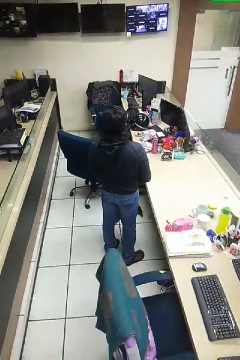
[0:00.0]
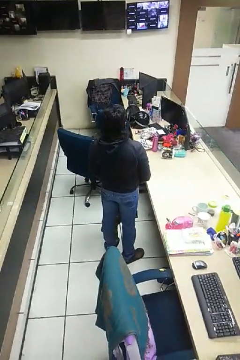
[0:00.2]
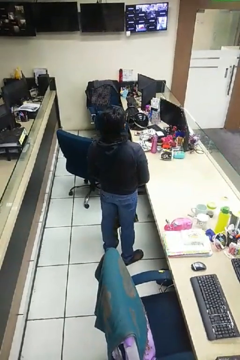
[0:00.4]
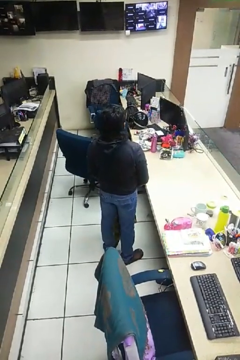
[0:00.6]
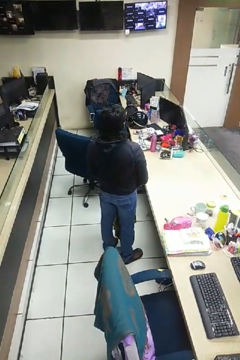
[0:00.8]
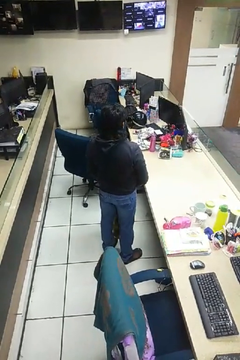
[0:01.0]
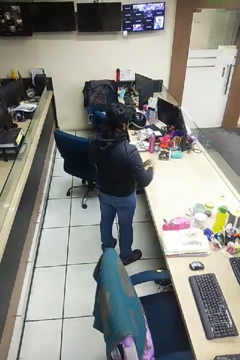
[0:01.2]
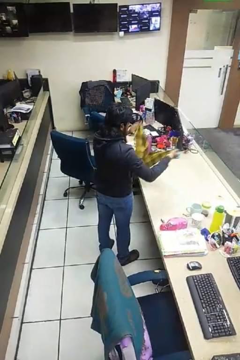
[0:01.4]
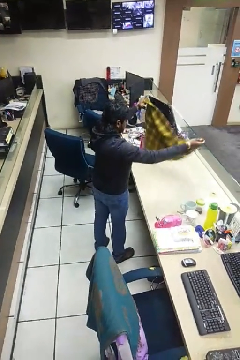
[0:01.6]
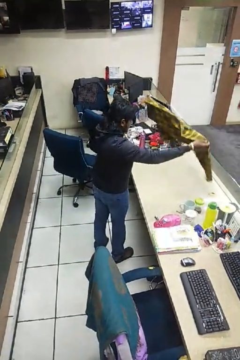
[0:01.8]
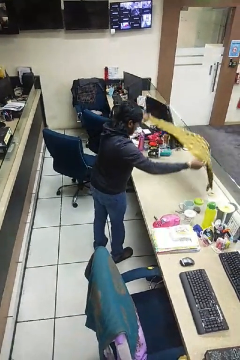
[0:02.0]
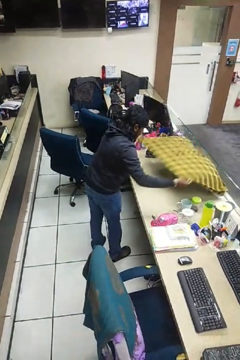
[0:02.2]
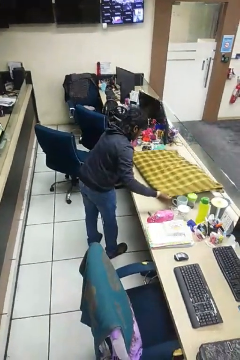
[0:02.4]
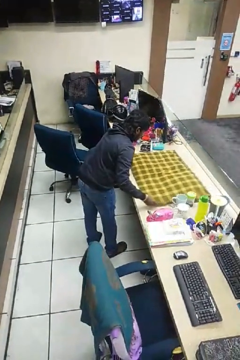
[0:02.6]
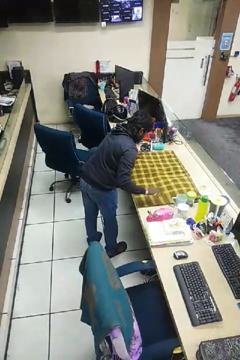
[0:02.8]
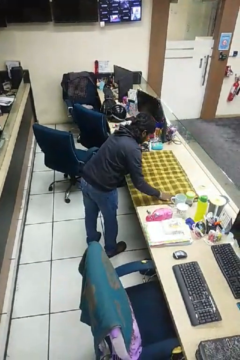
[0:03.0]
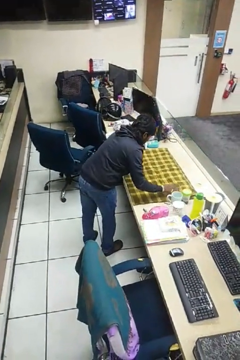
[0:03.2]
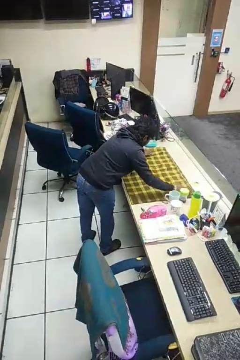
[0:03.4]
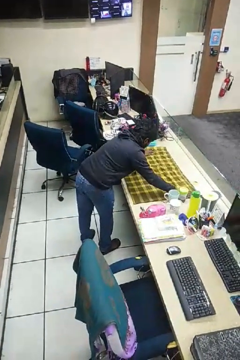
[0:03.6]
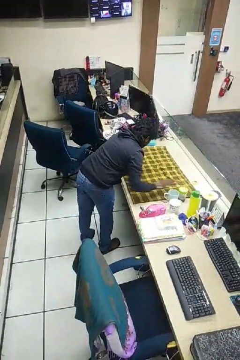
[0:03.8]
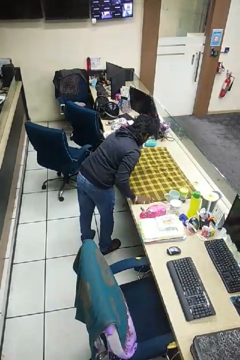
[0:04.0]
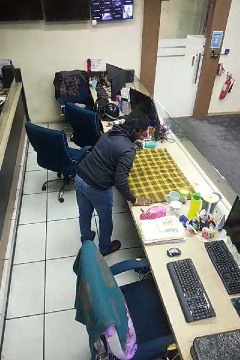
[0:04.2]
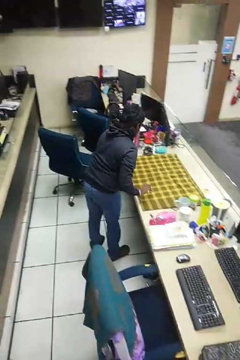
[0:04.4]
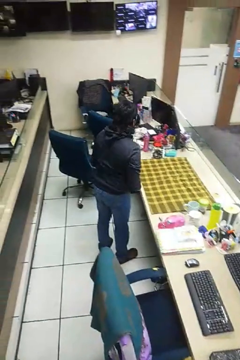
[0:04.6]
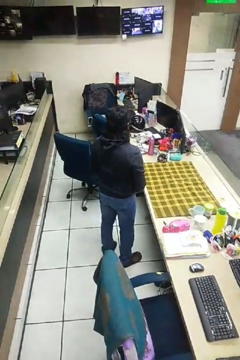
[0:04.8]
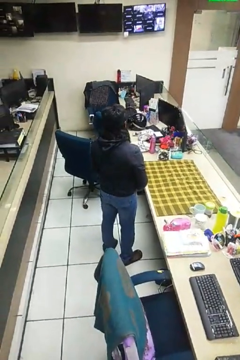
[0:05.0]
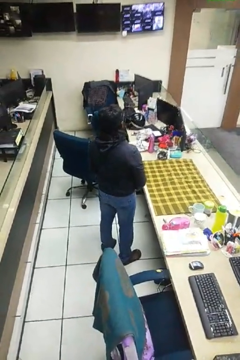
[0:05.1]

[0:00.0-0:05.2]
person spreads tablecloth

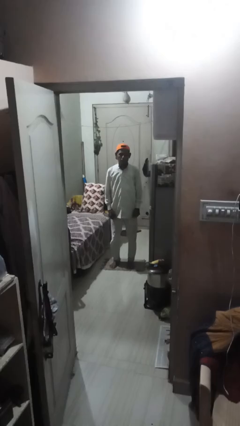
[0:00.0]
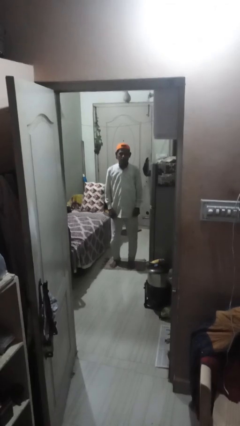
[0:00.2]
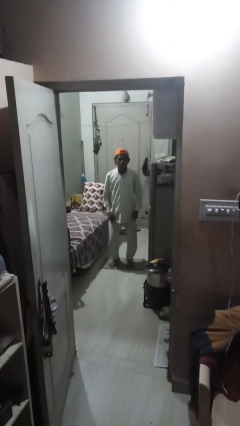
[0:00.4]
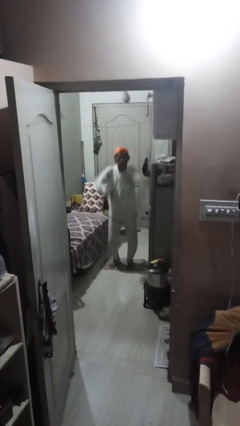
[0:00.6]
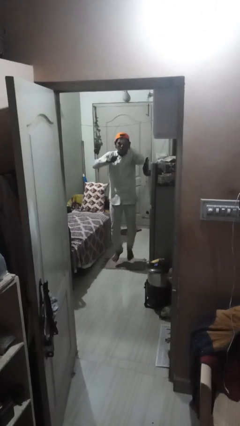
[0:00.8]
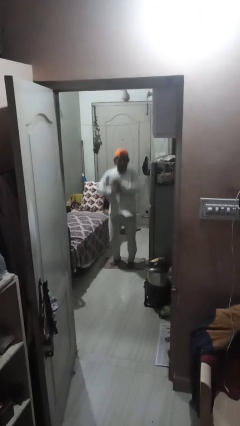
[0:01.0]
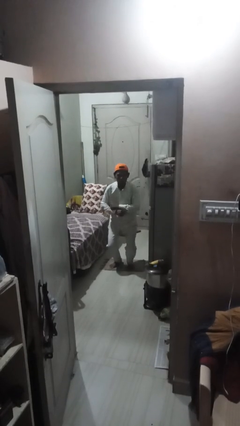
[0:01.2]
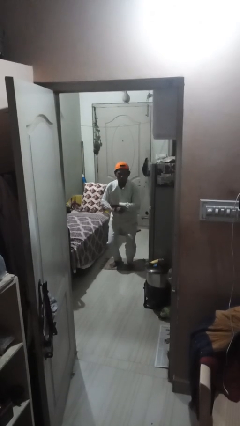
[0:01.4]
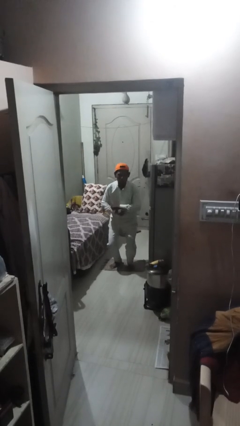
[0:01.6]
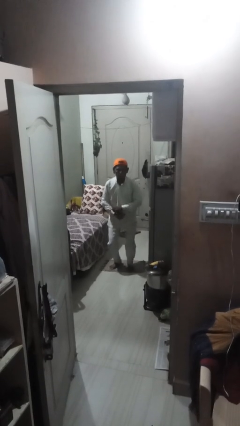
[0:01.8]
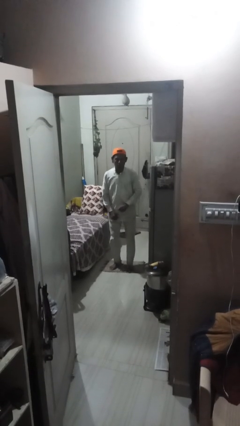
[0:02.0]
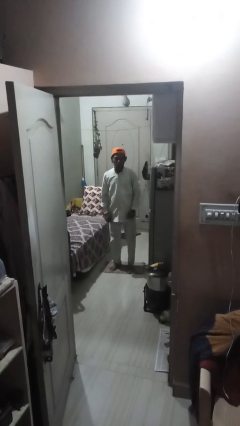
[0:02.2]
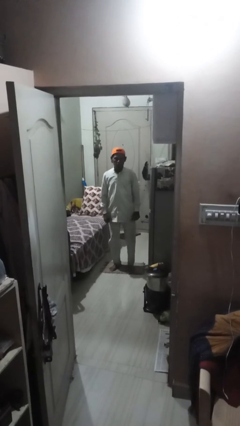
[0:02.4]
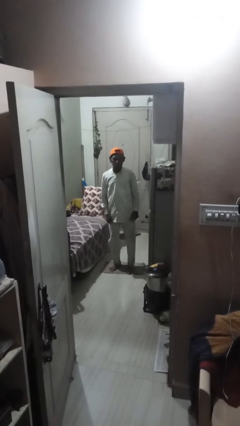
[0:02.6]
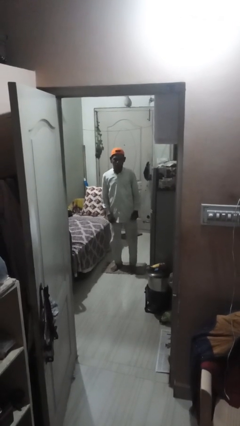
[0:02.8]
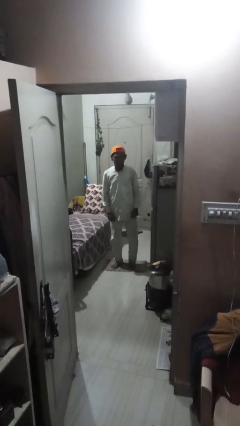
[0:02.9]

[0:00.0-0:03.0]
person jumps

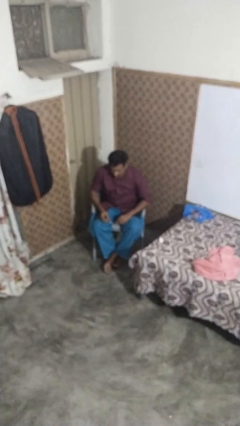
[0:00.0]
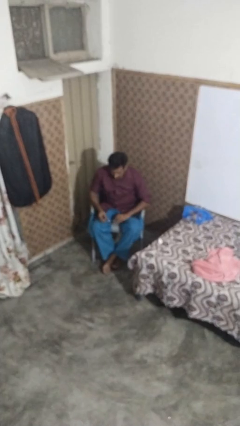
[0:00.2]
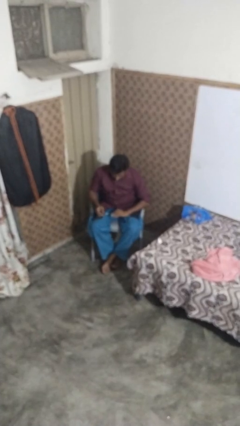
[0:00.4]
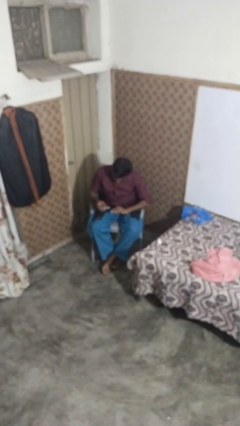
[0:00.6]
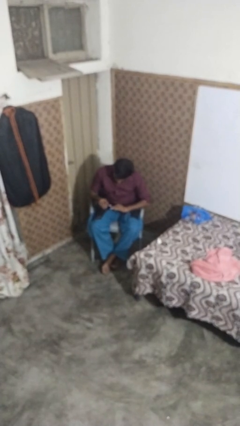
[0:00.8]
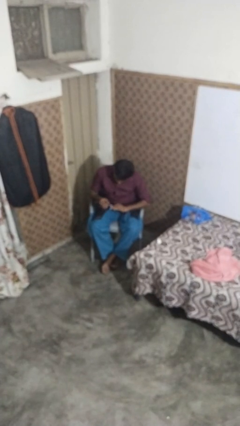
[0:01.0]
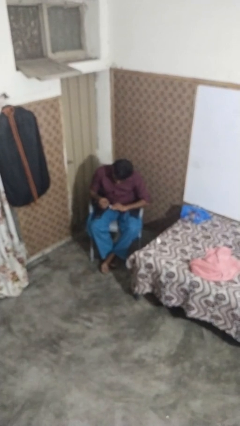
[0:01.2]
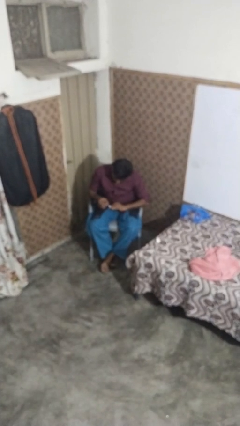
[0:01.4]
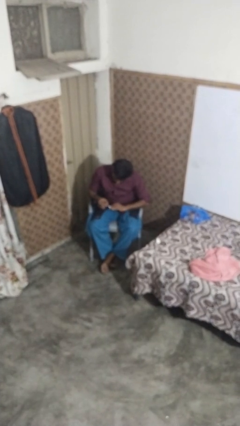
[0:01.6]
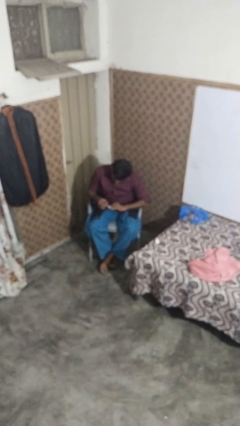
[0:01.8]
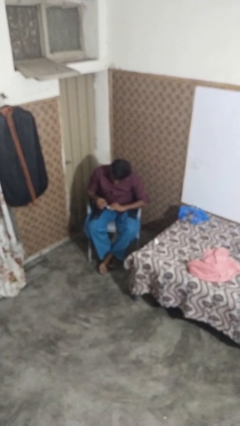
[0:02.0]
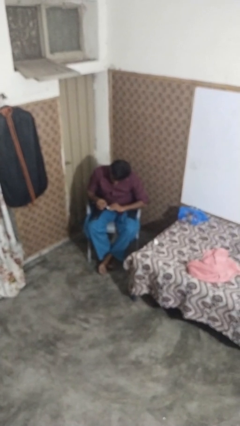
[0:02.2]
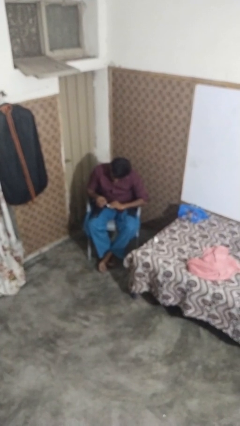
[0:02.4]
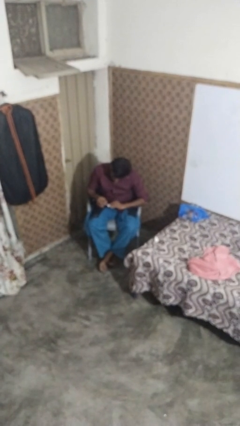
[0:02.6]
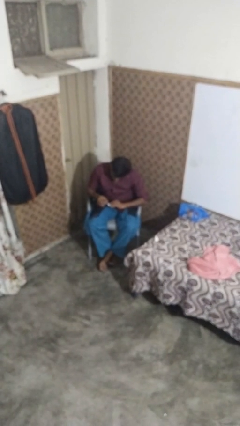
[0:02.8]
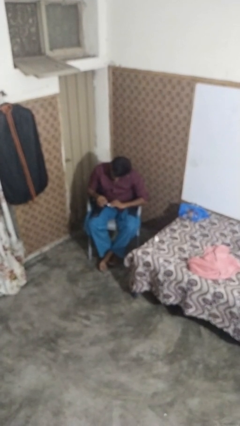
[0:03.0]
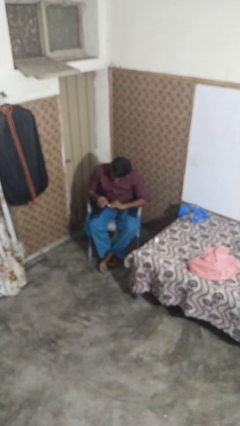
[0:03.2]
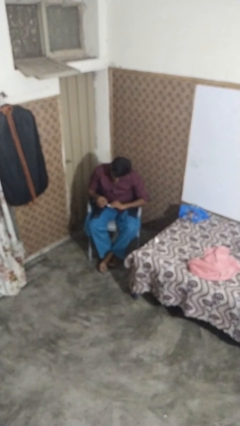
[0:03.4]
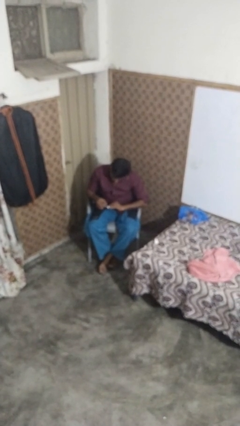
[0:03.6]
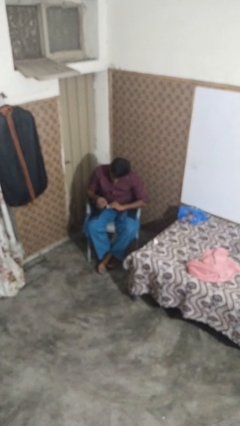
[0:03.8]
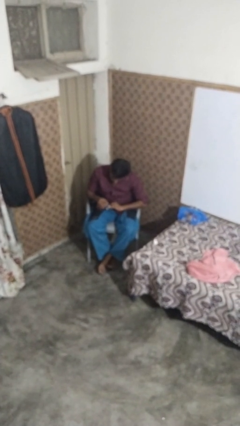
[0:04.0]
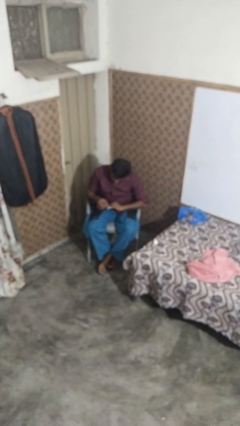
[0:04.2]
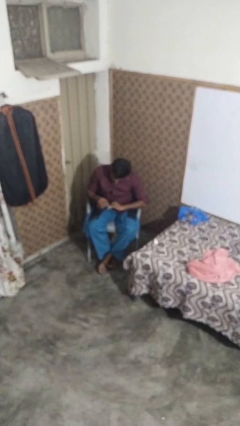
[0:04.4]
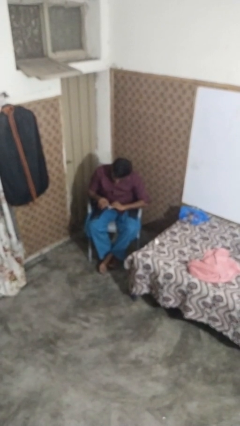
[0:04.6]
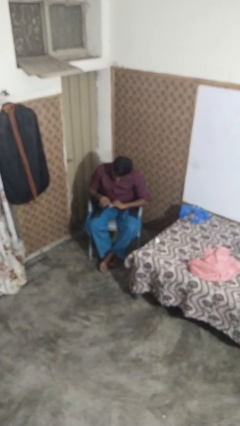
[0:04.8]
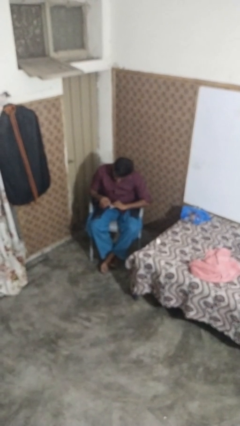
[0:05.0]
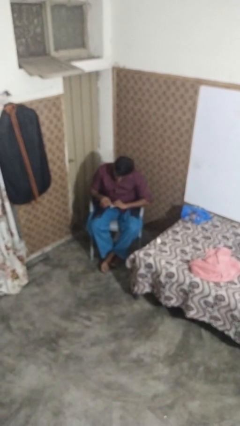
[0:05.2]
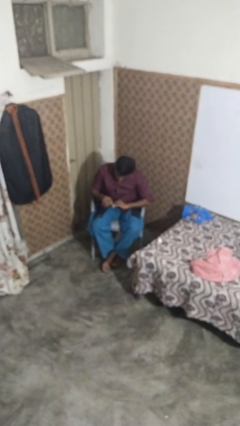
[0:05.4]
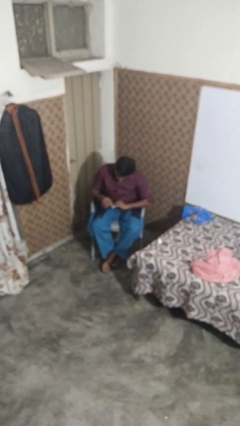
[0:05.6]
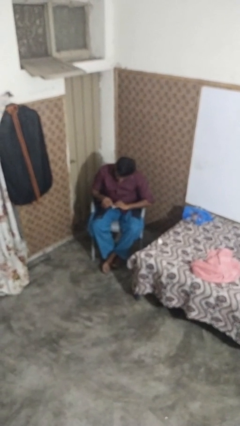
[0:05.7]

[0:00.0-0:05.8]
person paints fingernails

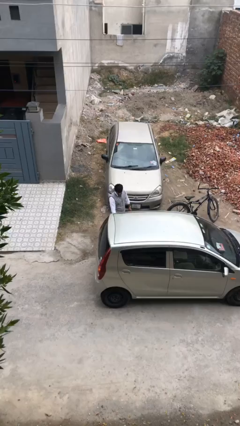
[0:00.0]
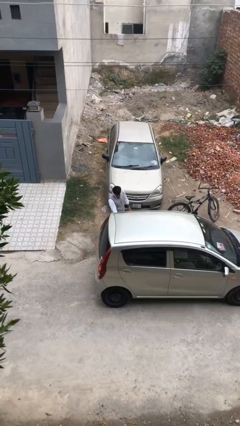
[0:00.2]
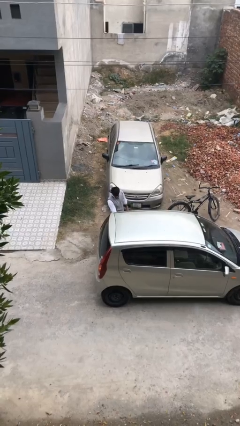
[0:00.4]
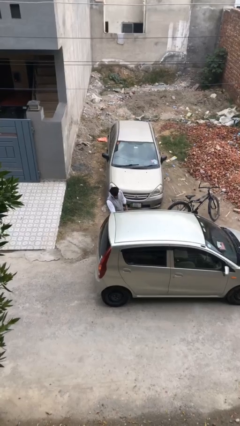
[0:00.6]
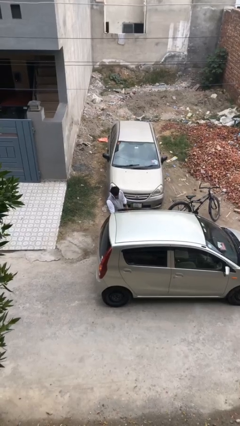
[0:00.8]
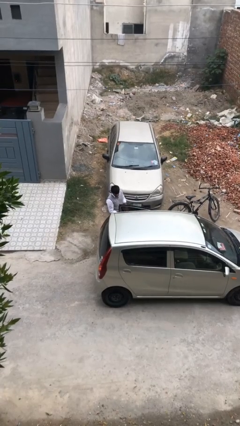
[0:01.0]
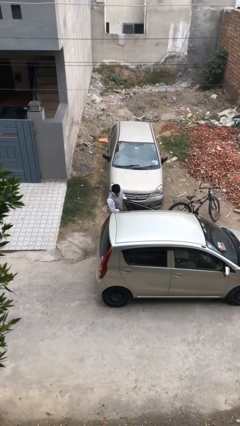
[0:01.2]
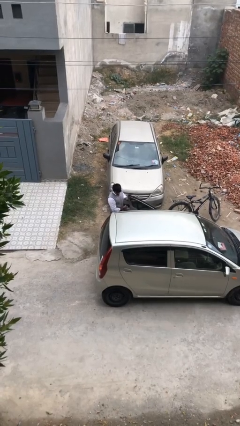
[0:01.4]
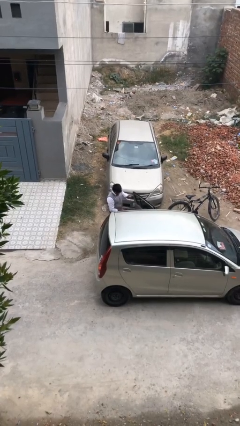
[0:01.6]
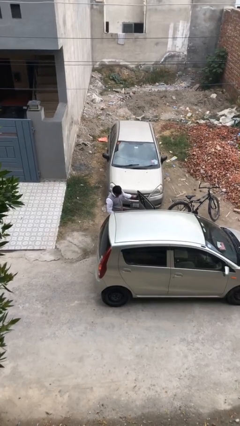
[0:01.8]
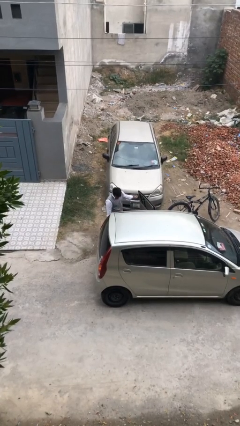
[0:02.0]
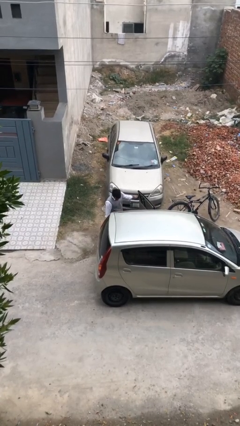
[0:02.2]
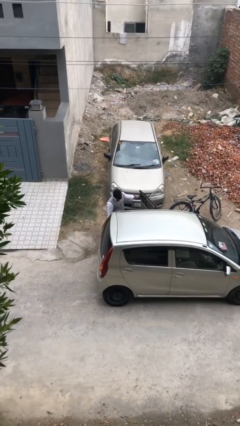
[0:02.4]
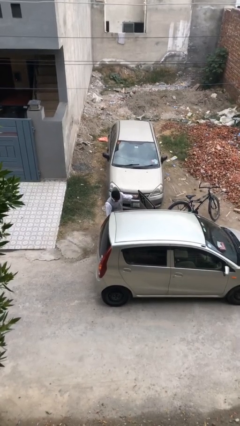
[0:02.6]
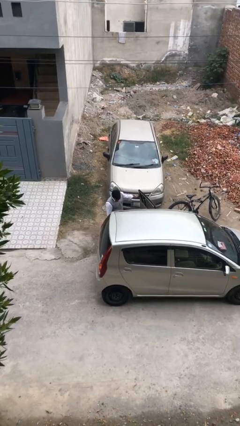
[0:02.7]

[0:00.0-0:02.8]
person opens car door

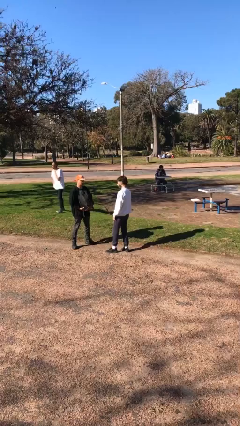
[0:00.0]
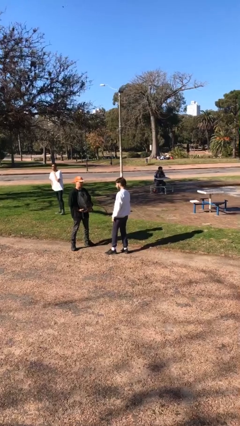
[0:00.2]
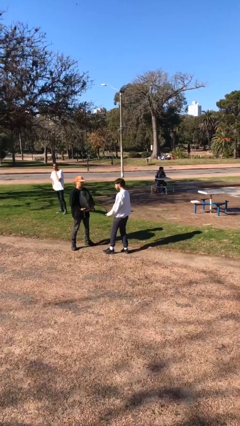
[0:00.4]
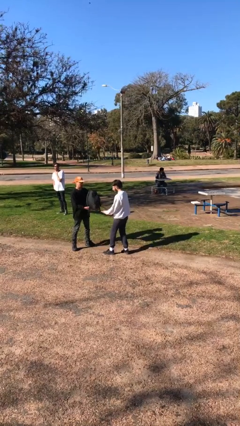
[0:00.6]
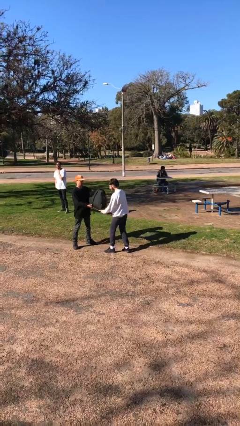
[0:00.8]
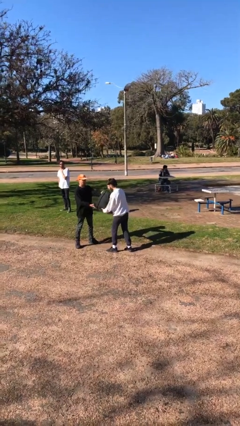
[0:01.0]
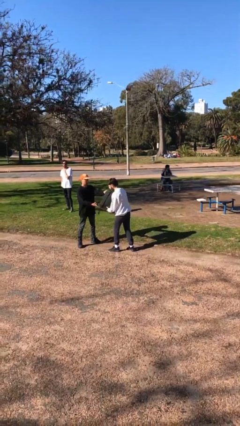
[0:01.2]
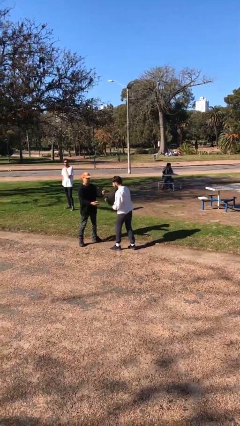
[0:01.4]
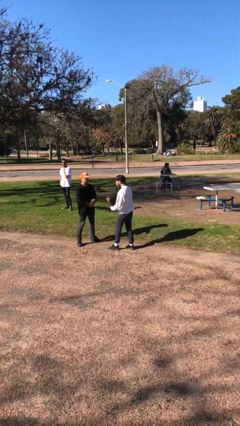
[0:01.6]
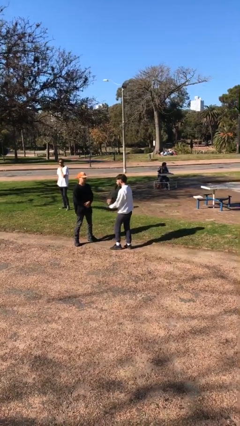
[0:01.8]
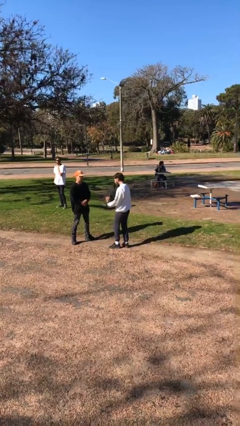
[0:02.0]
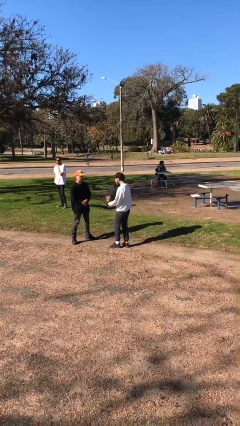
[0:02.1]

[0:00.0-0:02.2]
person transfers object to person
